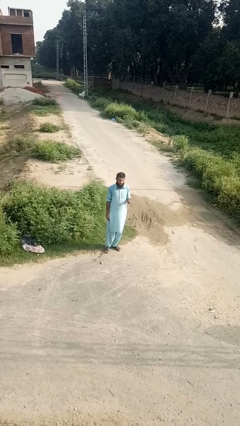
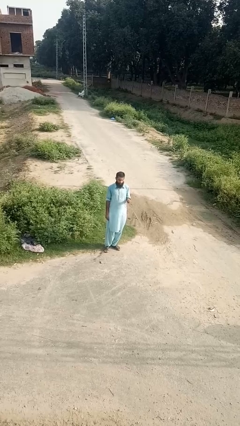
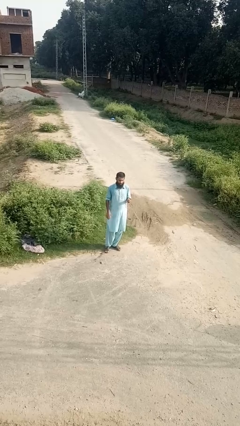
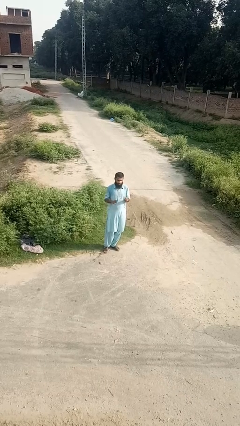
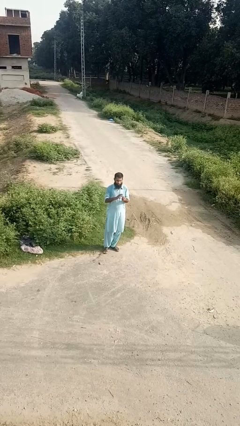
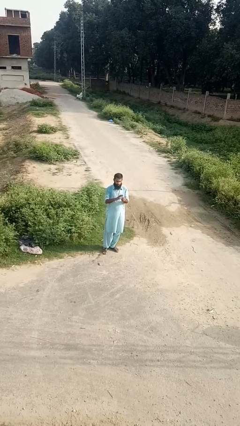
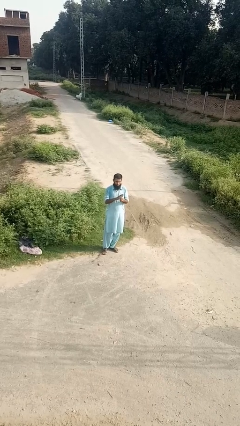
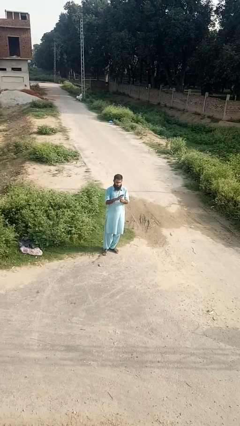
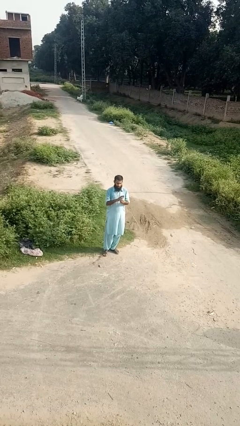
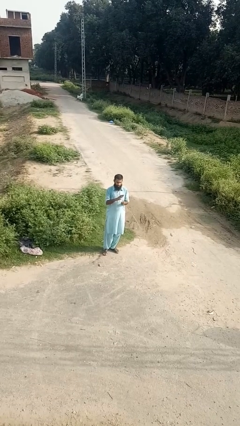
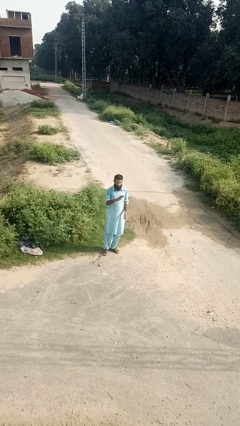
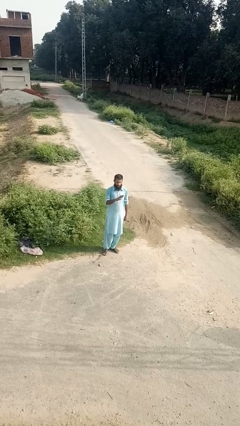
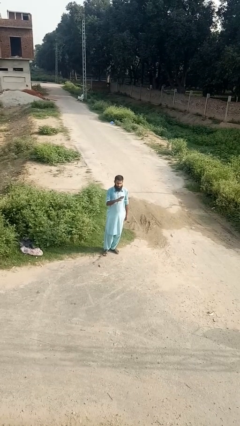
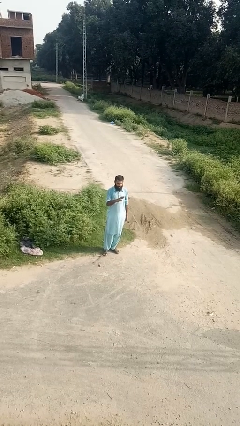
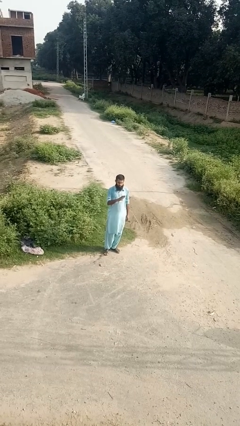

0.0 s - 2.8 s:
person puts on ring

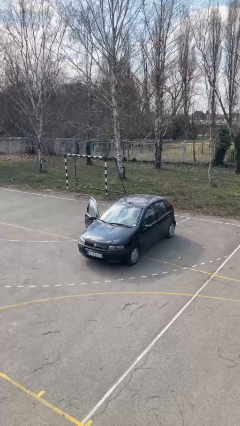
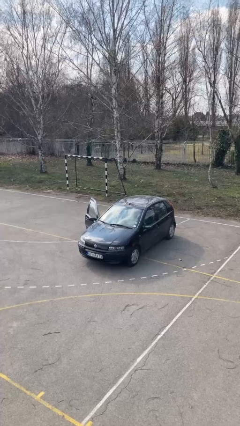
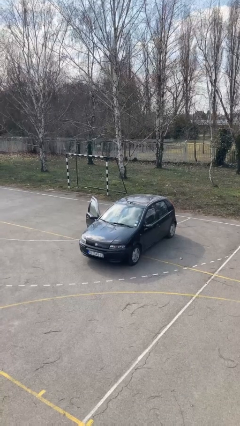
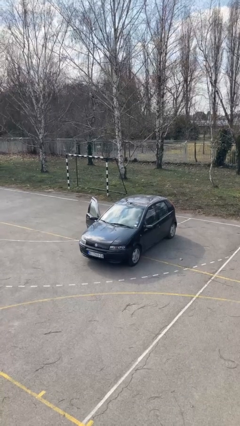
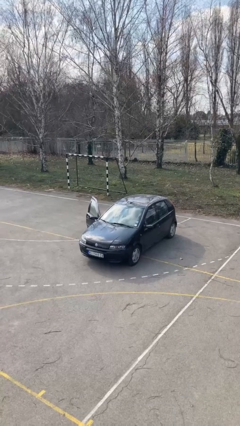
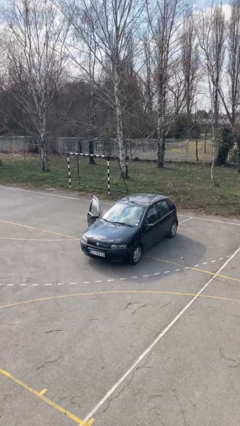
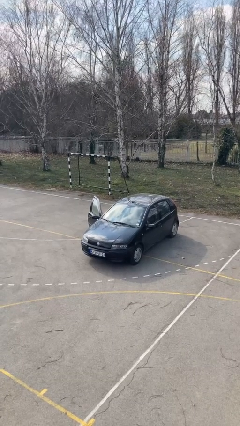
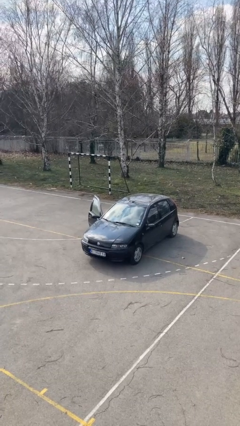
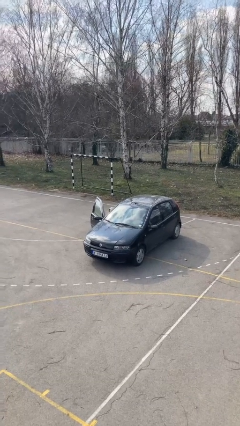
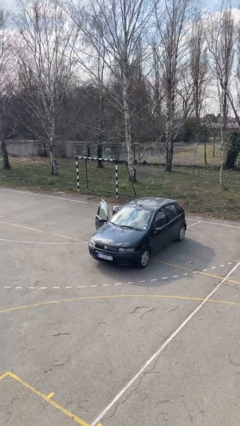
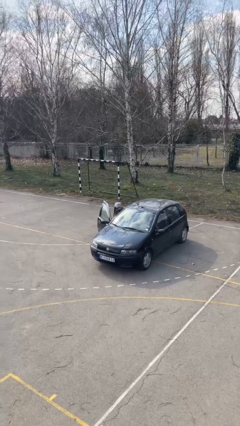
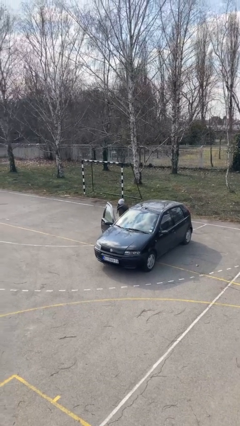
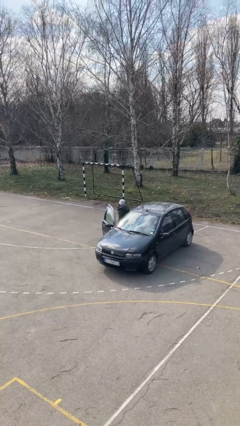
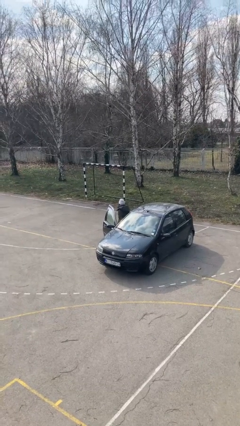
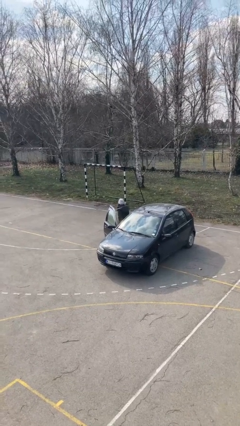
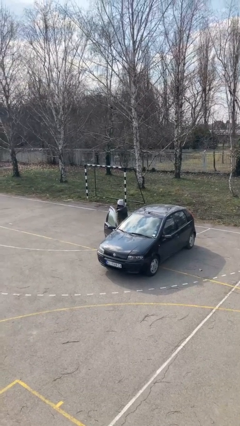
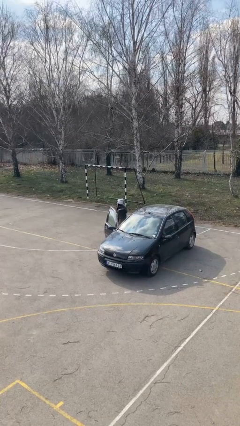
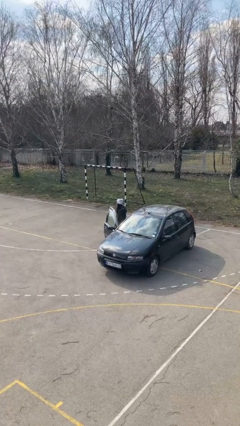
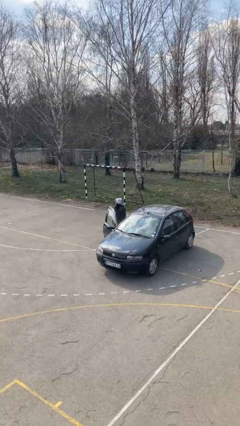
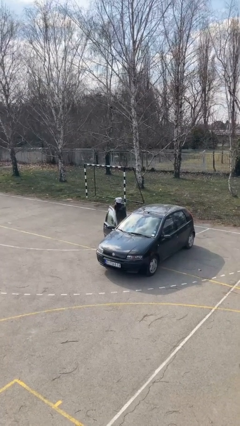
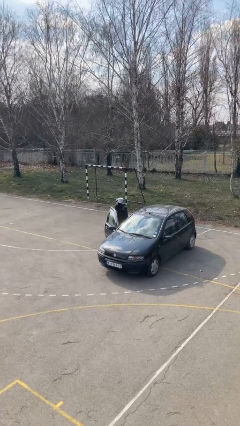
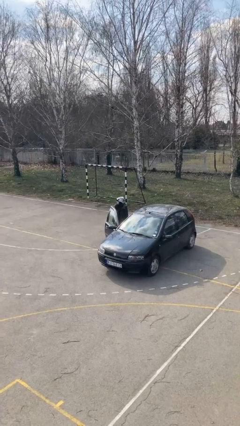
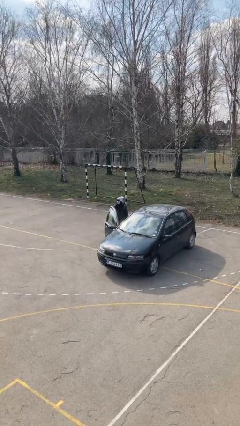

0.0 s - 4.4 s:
person exits car

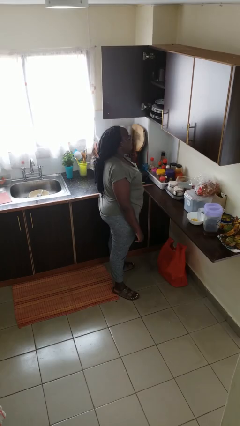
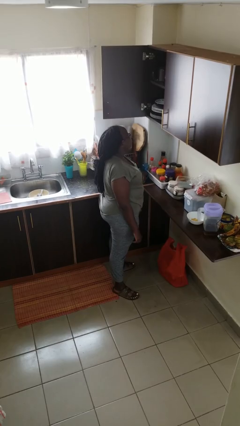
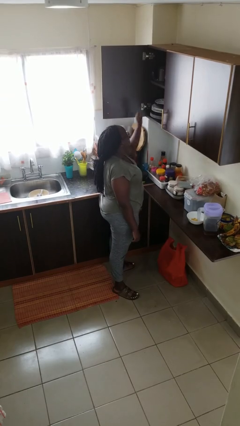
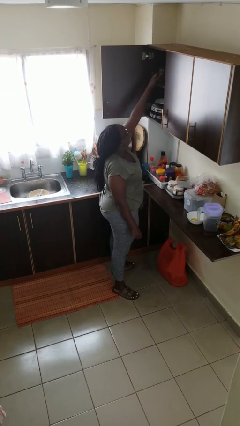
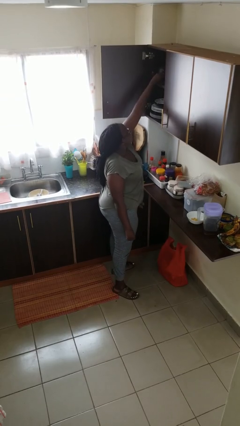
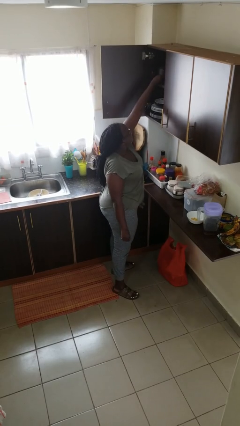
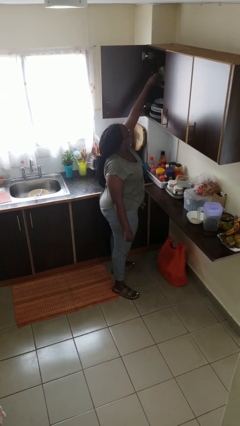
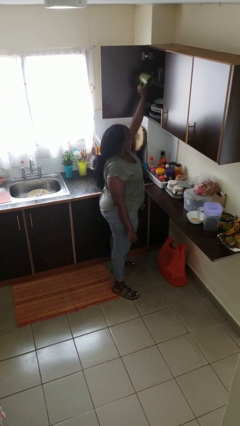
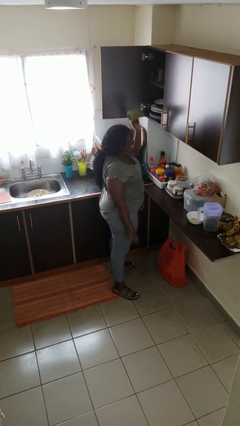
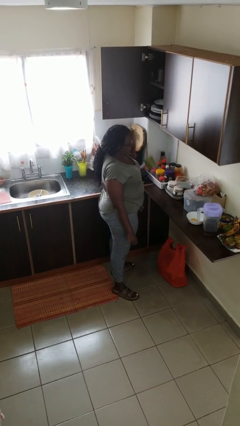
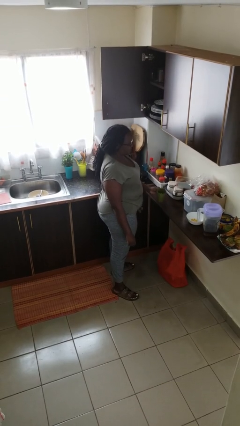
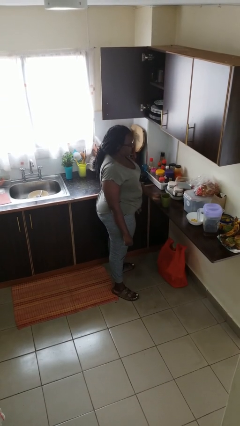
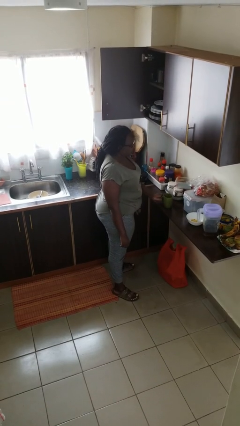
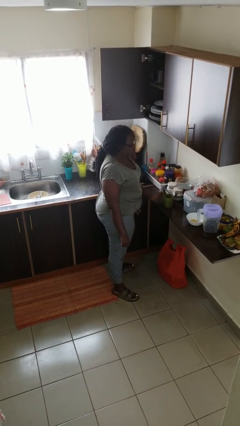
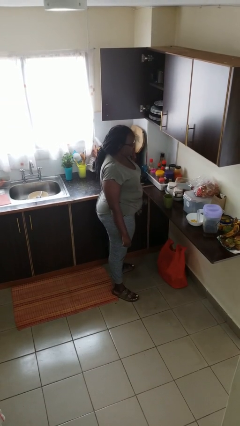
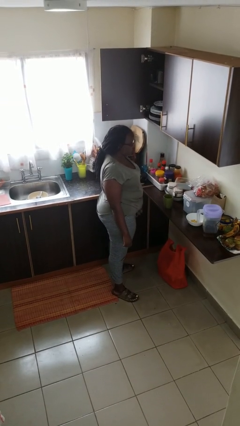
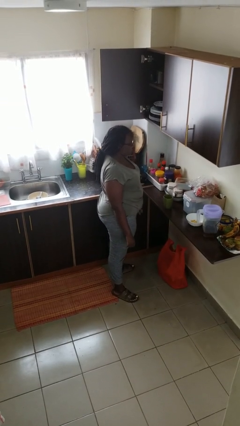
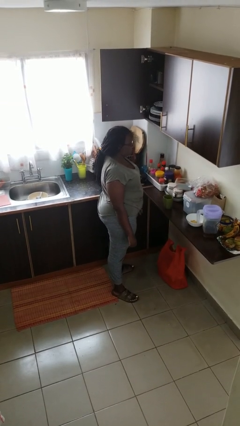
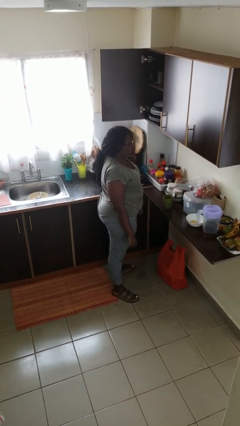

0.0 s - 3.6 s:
person takes object from cabinet

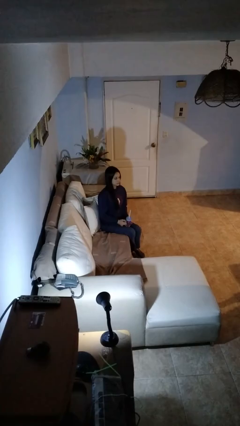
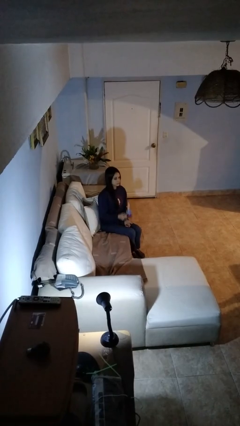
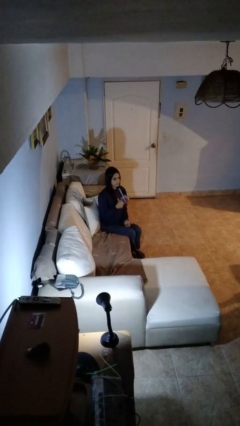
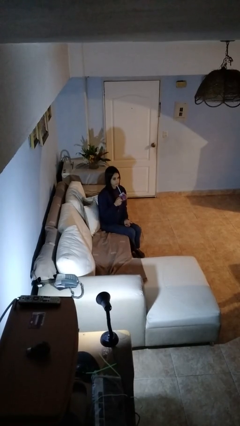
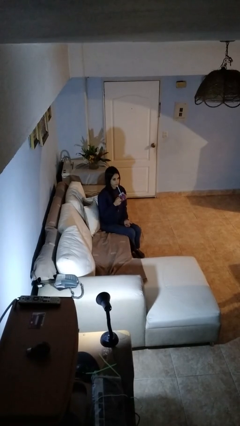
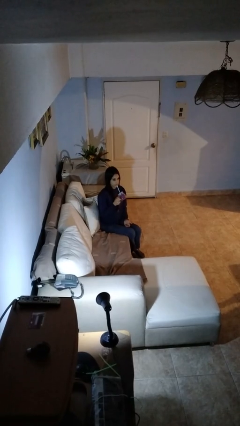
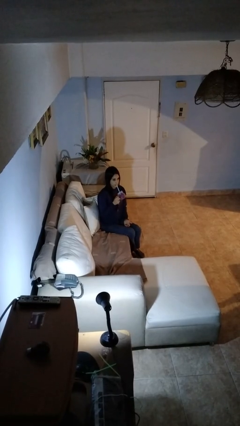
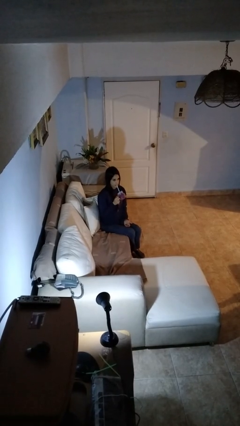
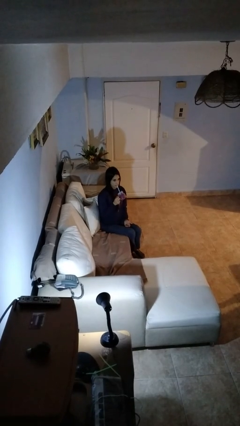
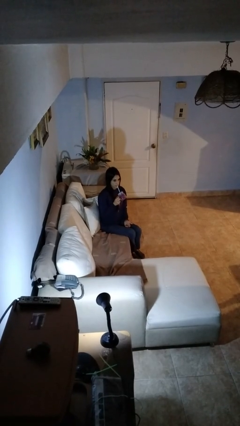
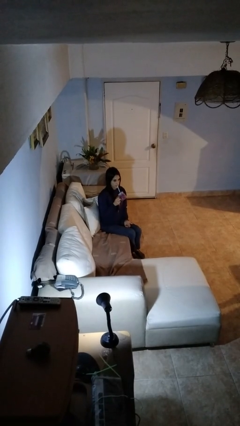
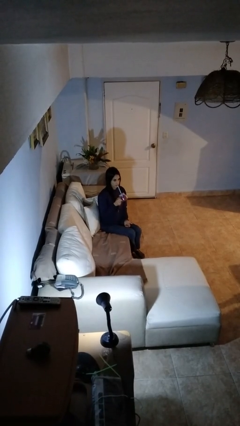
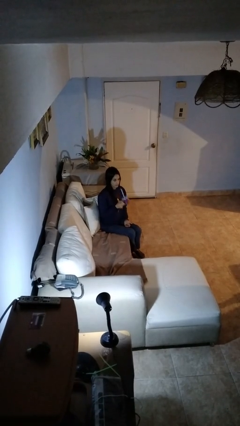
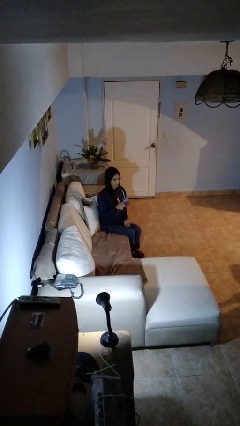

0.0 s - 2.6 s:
person drinks from straw

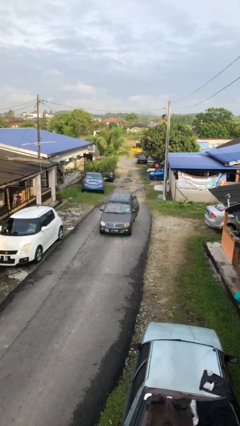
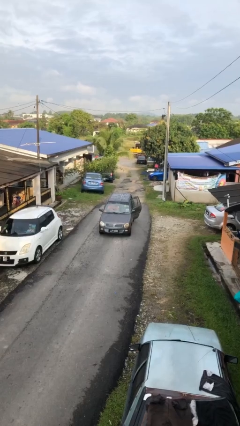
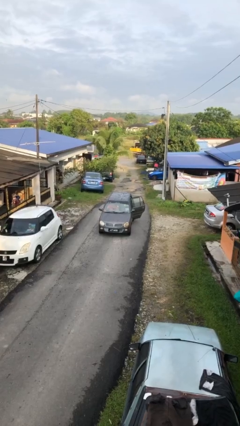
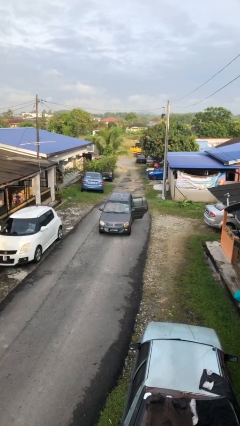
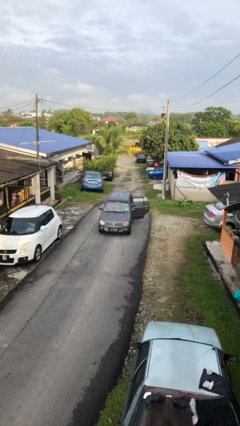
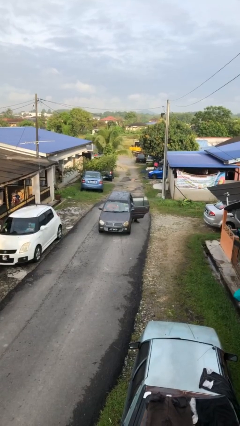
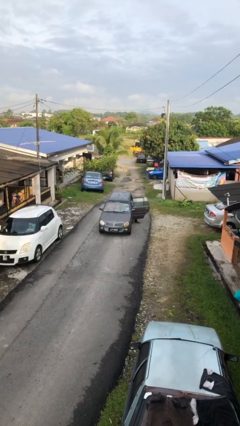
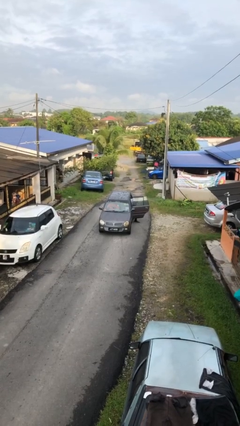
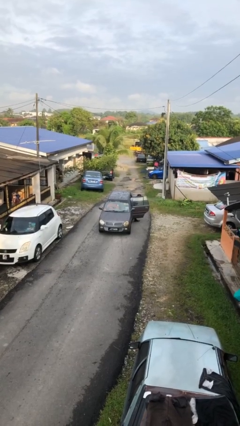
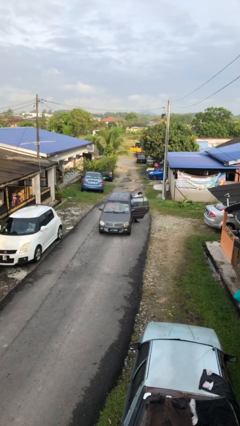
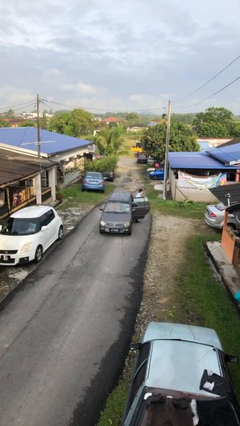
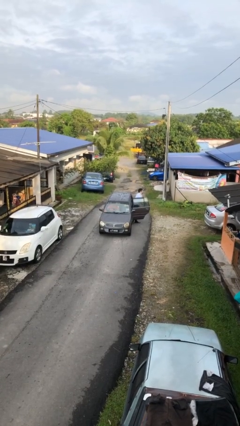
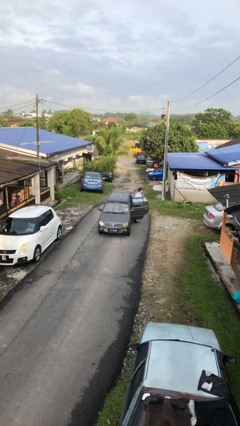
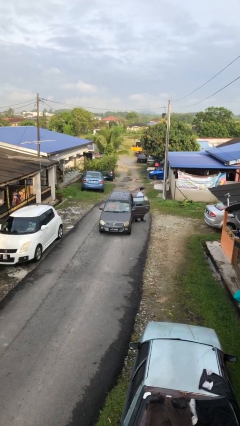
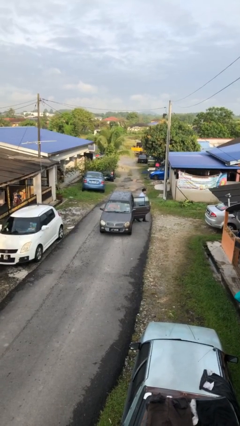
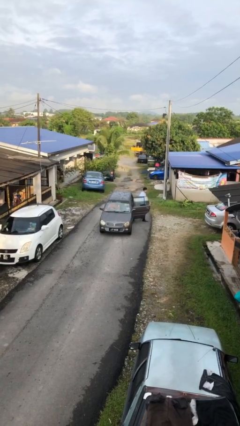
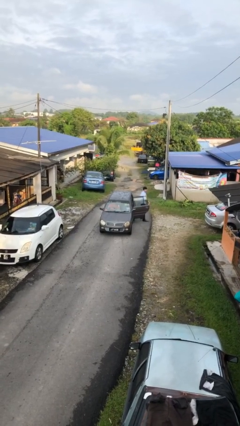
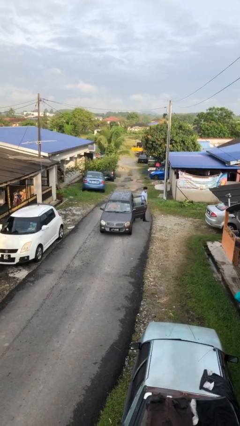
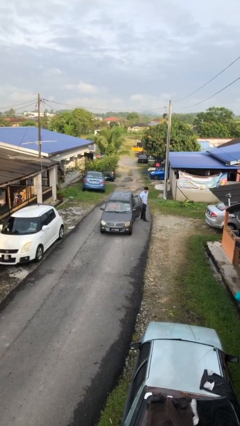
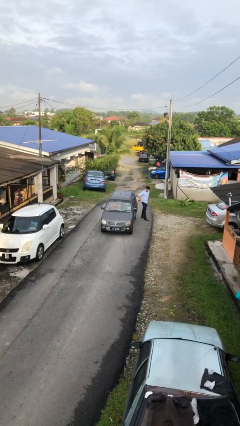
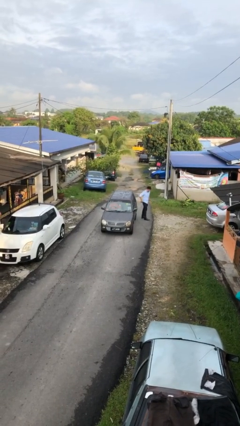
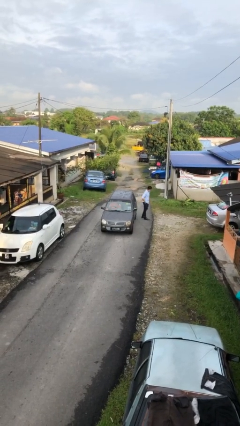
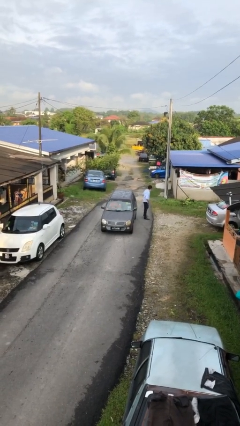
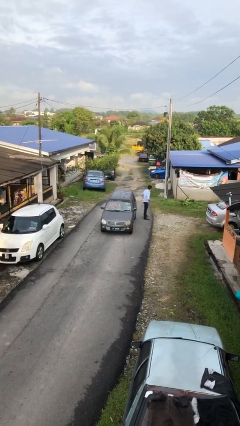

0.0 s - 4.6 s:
car drops off person
